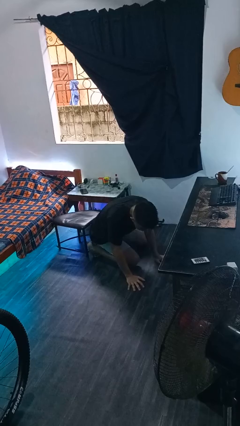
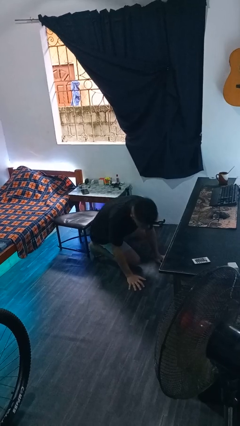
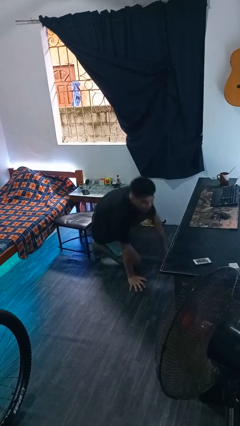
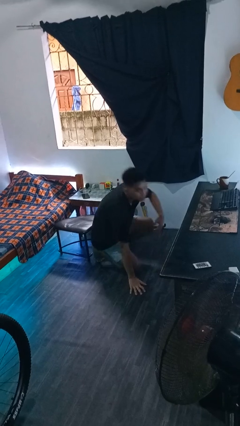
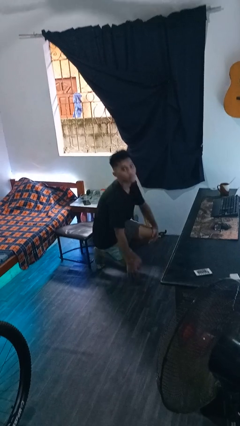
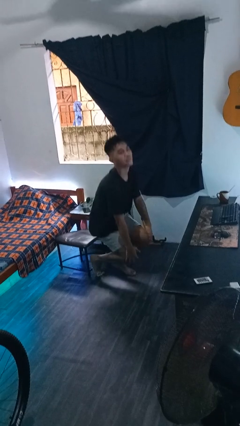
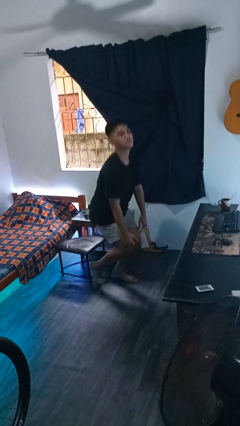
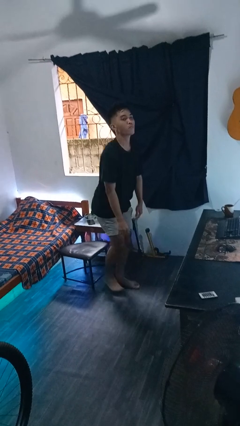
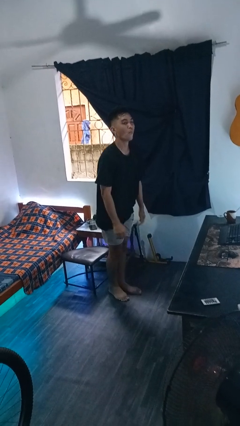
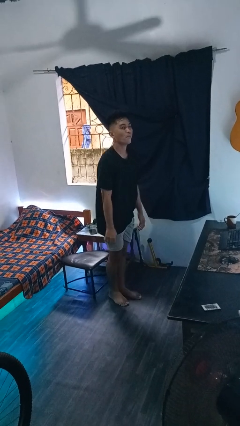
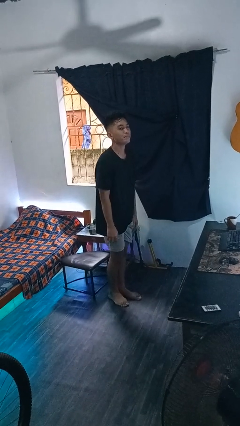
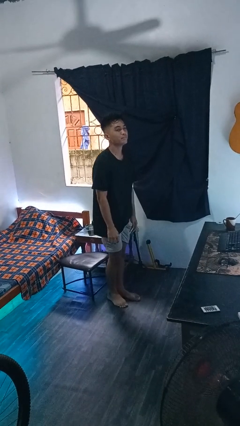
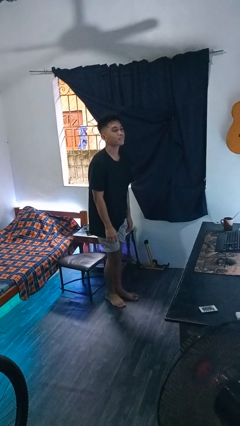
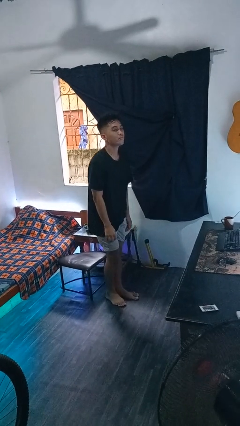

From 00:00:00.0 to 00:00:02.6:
person stands up from floor

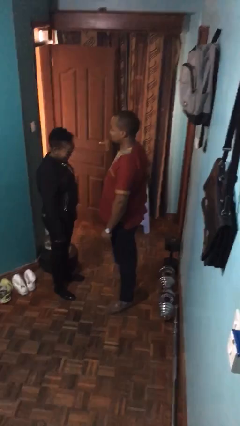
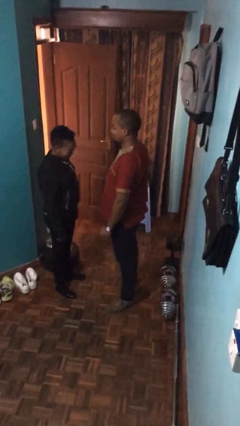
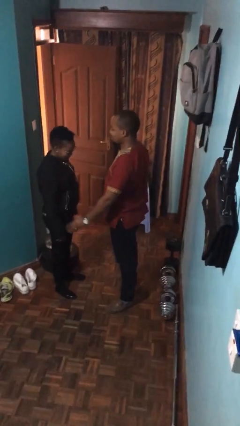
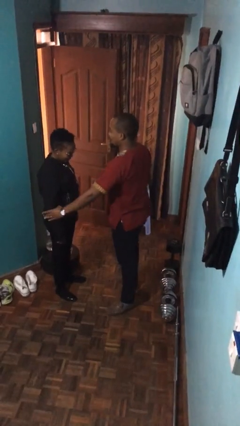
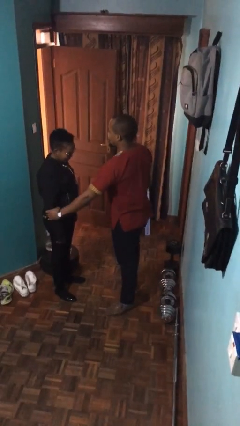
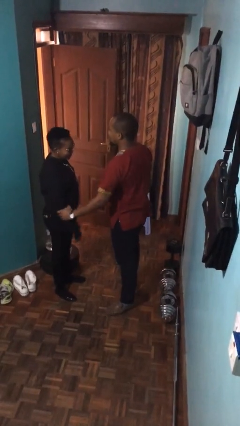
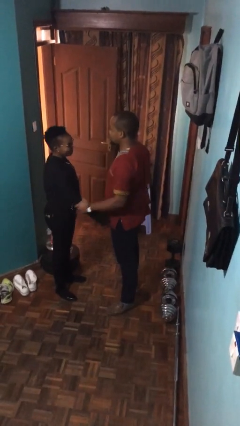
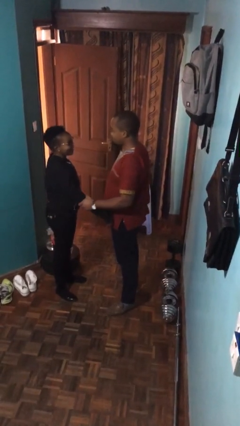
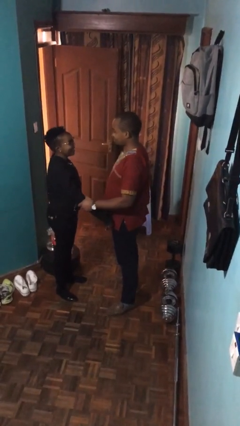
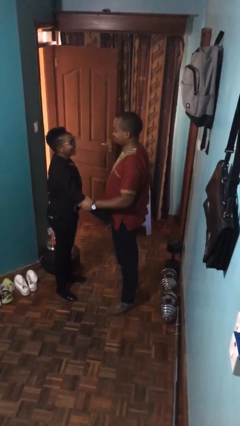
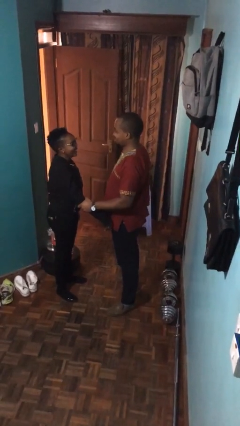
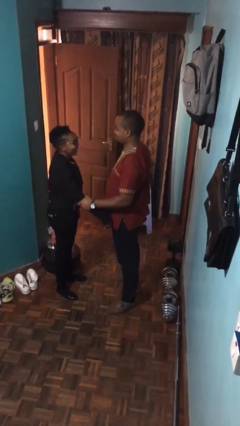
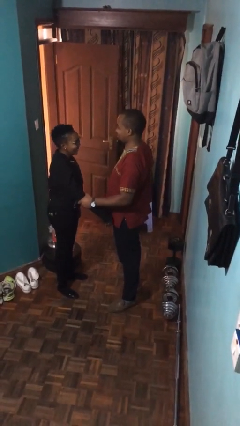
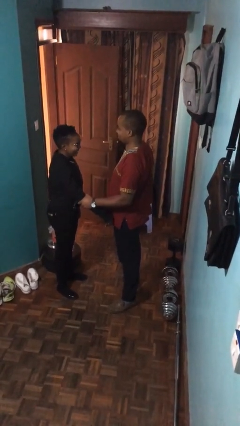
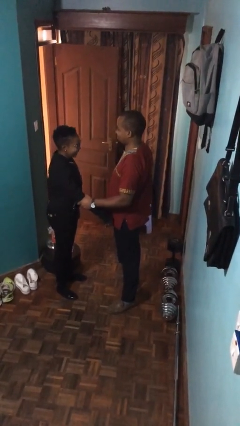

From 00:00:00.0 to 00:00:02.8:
person grabs person by forearm

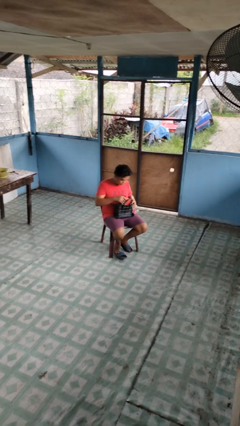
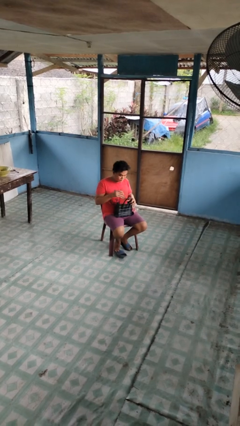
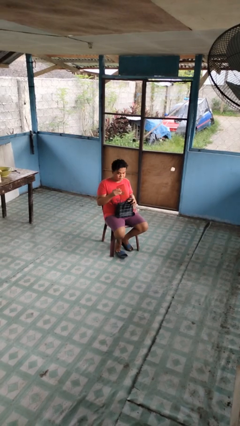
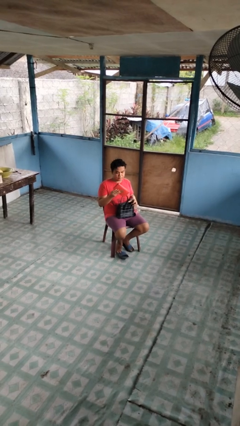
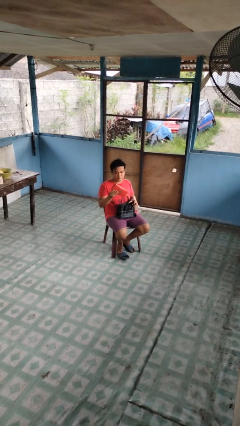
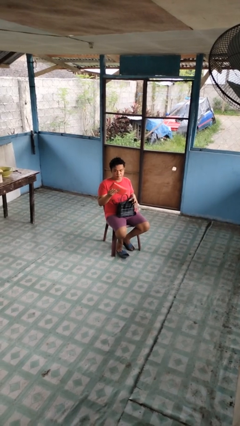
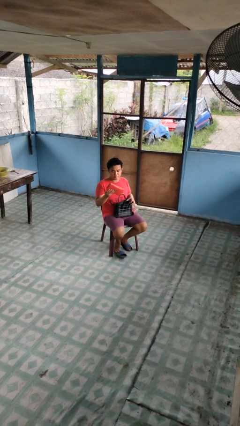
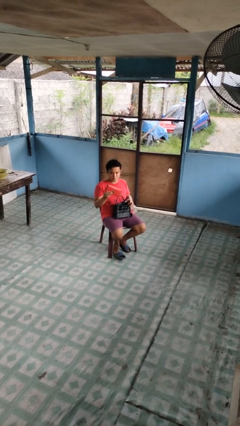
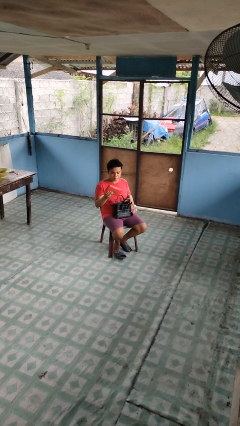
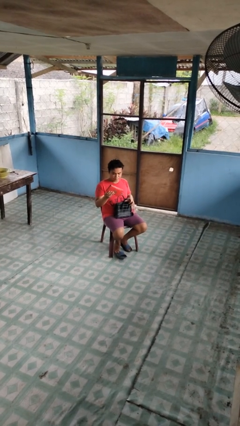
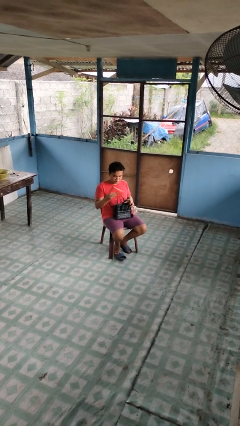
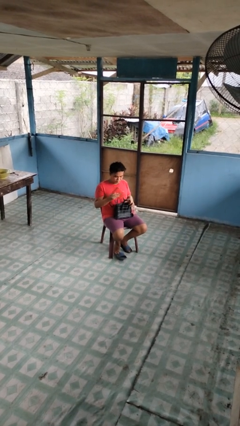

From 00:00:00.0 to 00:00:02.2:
person takes object from purse

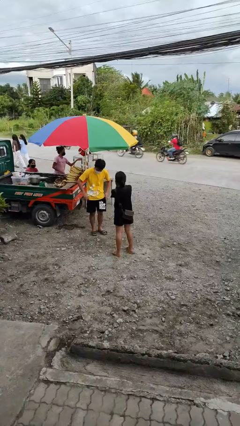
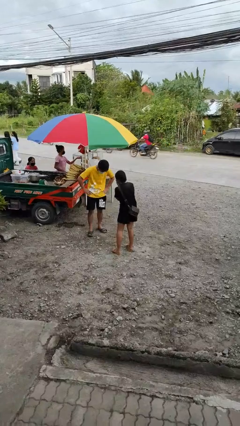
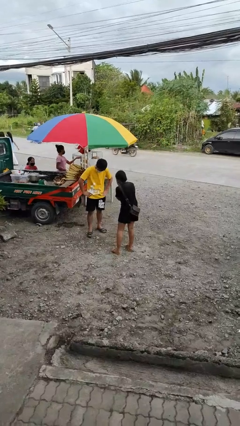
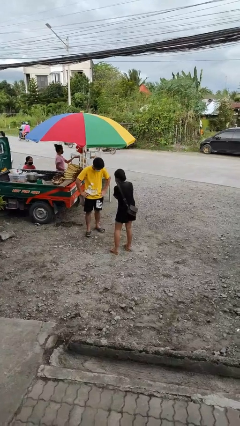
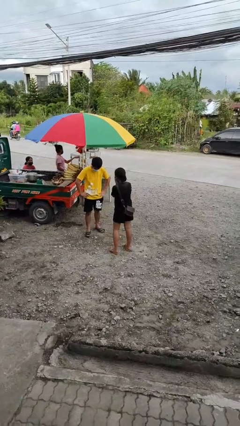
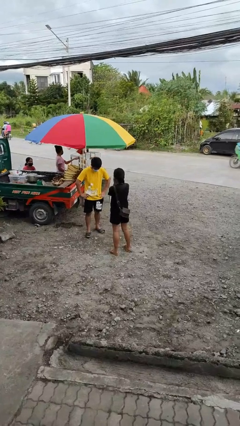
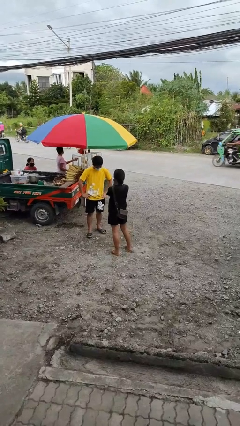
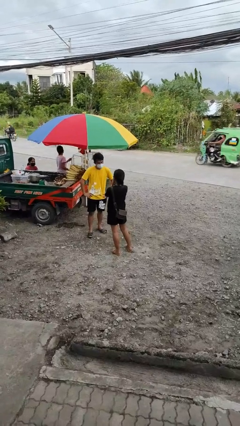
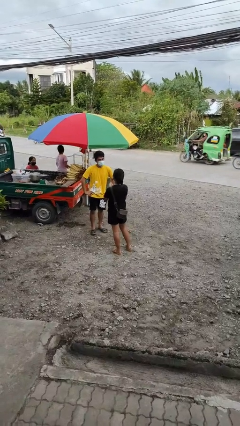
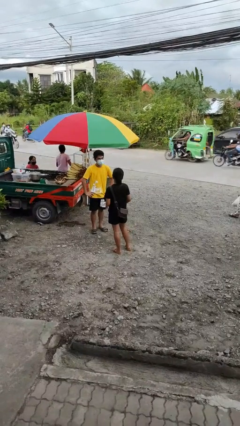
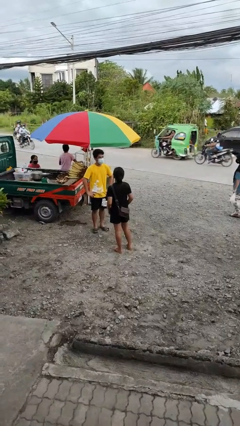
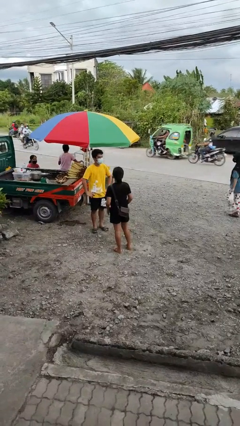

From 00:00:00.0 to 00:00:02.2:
person laughs with person

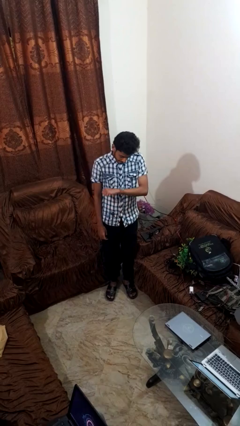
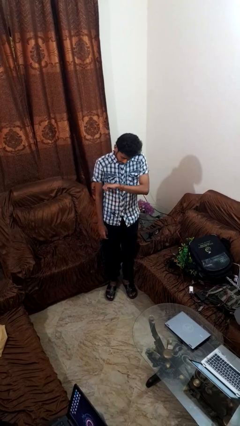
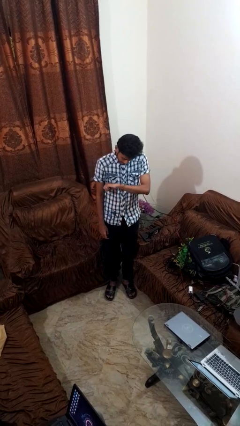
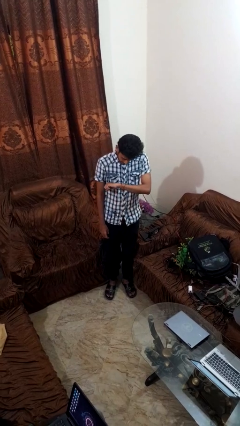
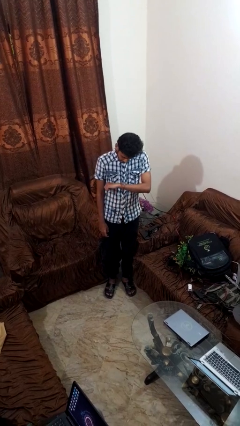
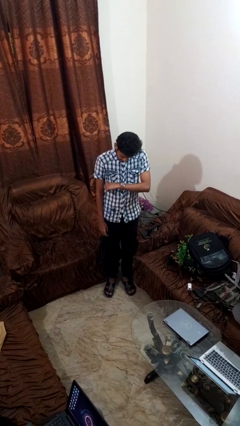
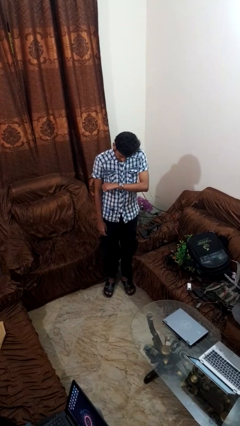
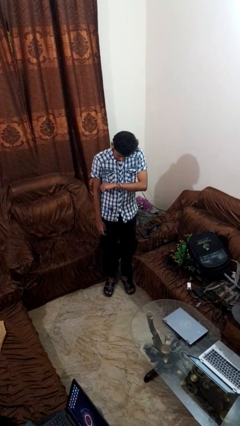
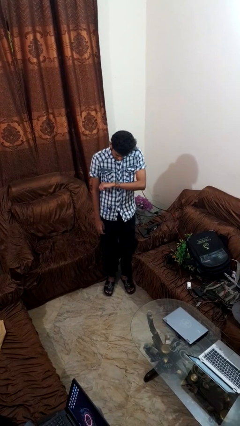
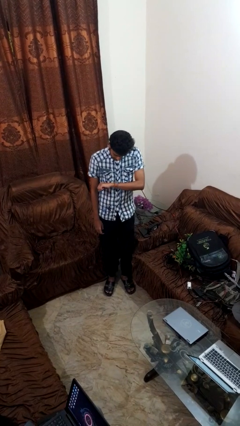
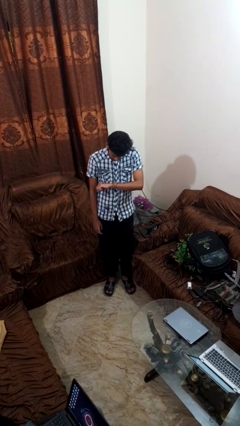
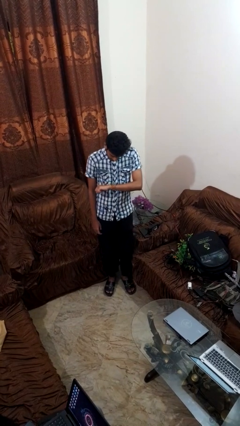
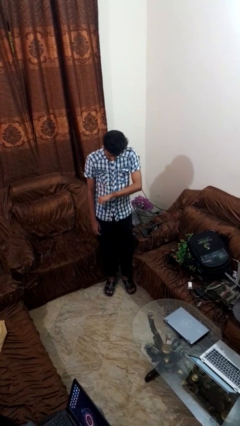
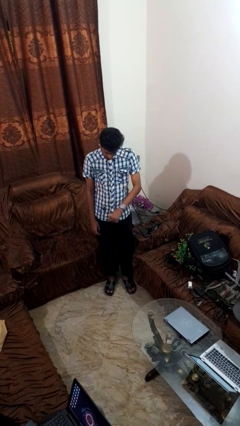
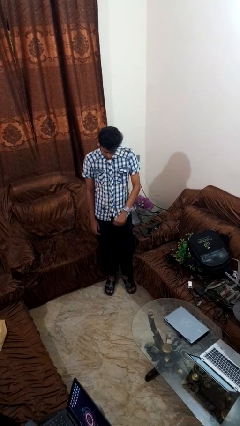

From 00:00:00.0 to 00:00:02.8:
person looks at wristwatch

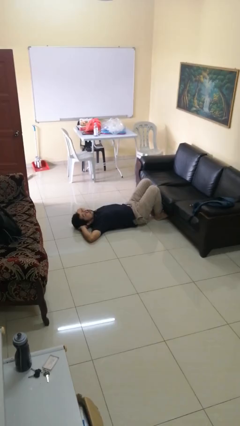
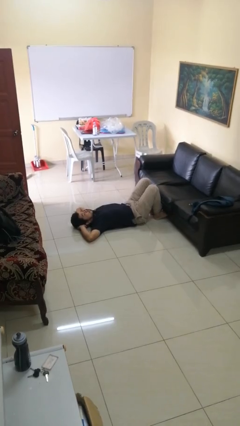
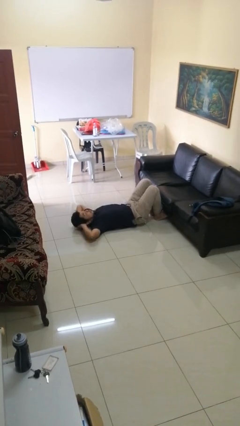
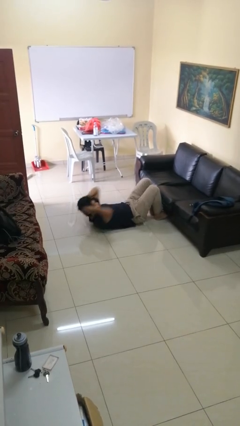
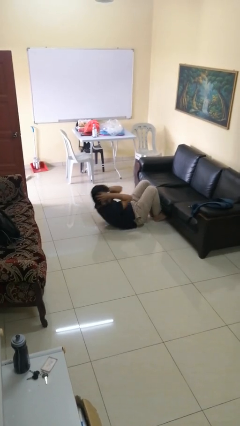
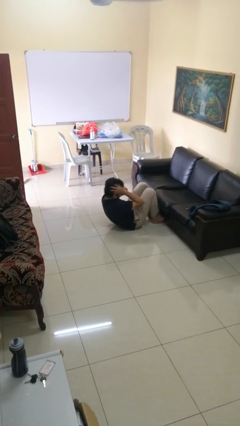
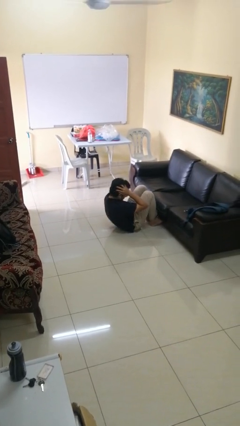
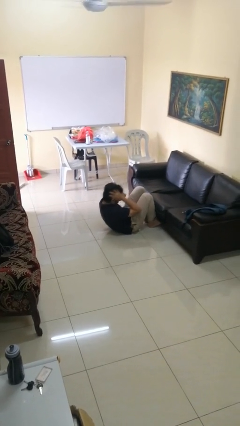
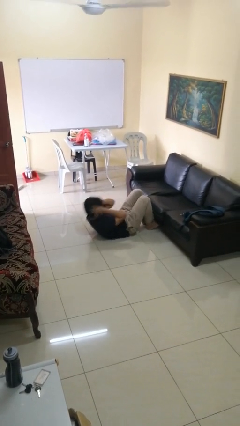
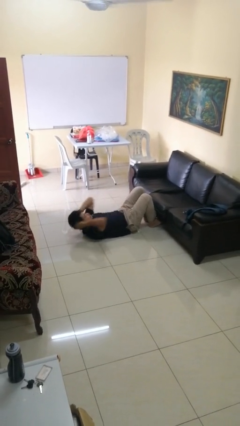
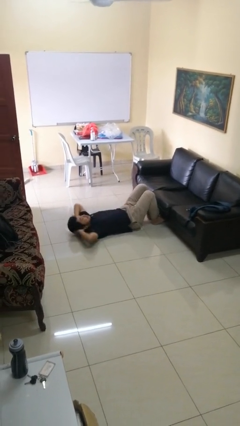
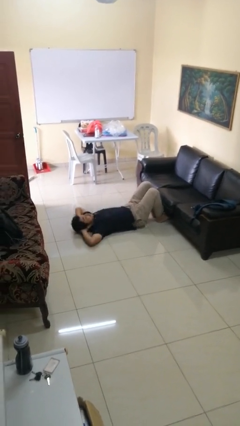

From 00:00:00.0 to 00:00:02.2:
person exercises with situp

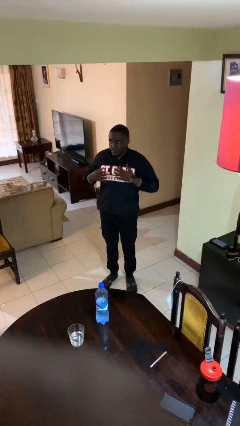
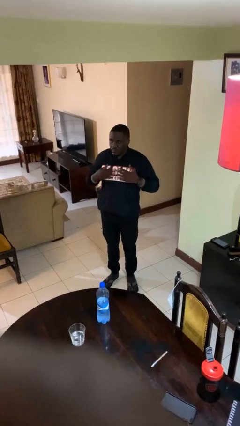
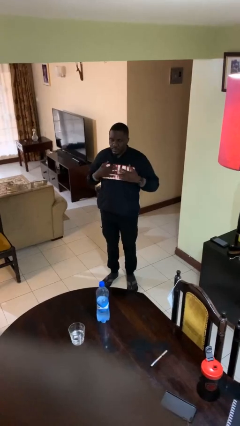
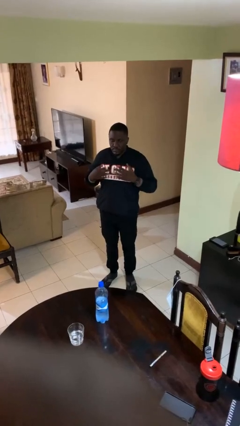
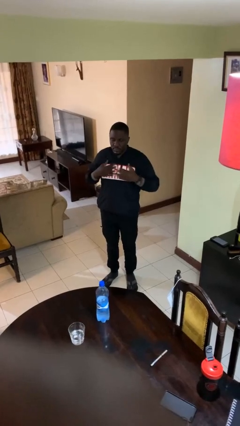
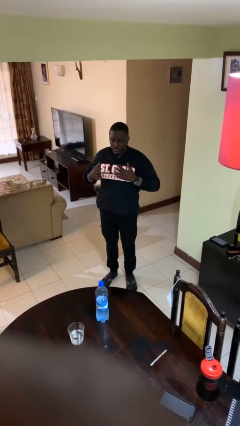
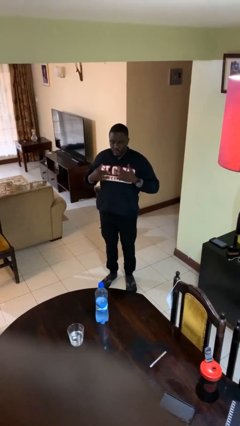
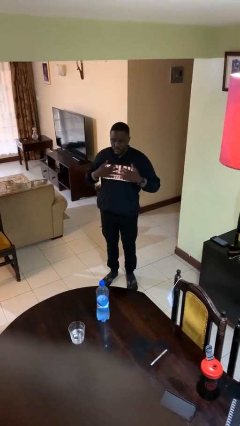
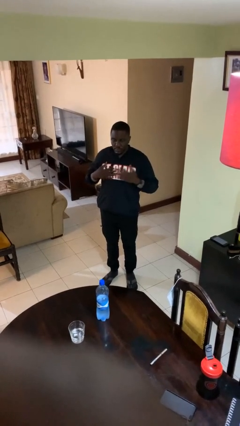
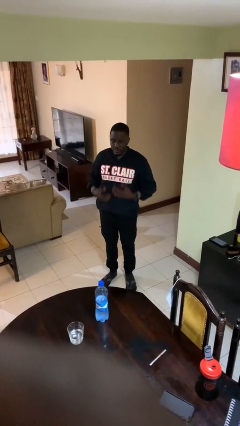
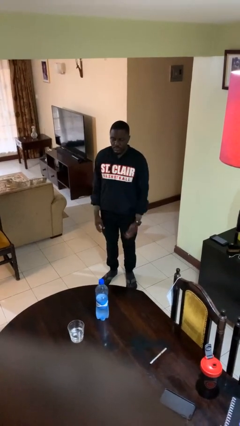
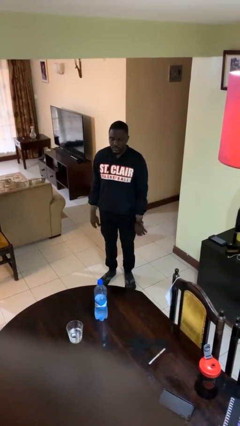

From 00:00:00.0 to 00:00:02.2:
person drums on chest
